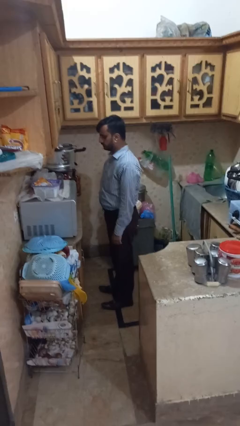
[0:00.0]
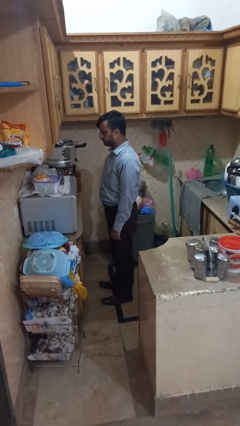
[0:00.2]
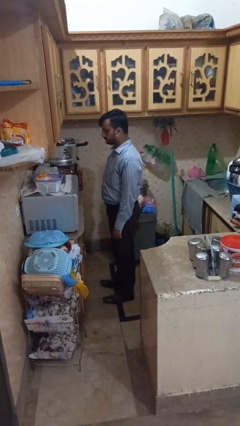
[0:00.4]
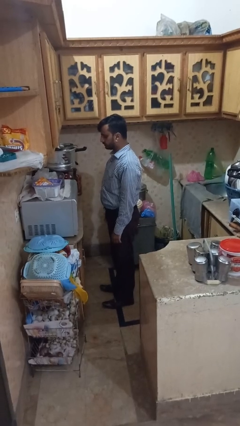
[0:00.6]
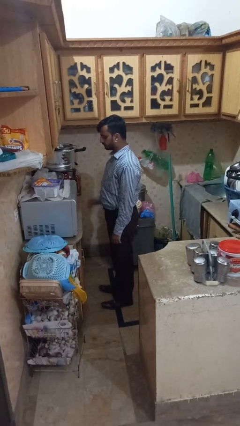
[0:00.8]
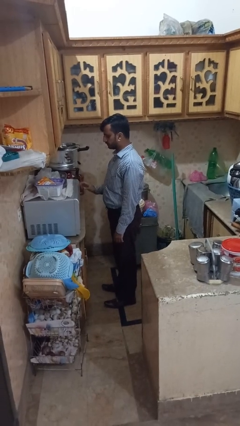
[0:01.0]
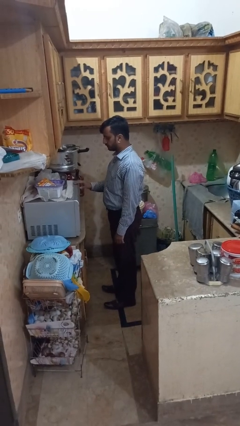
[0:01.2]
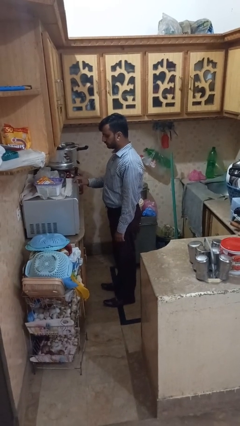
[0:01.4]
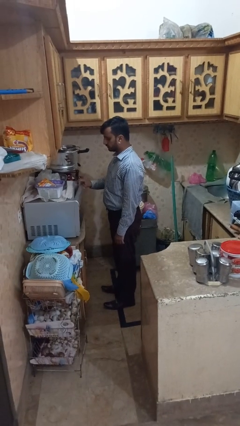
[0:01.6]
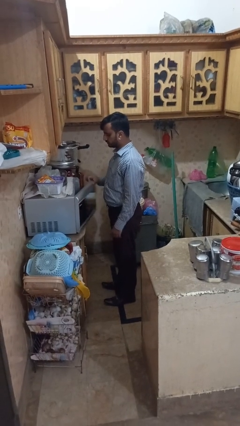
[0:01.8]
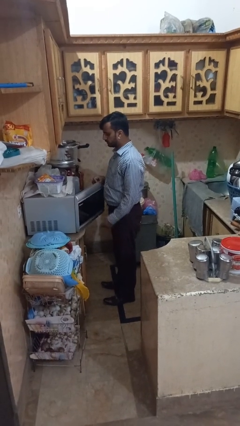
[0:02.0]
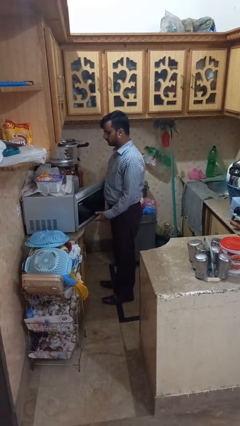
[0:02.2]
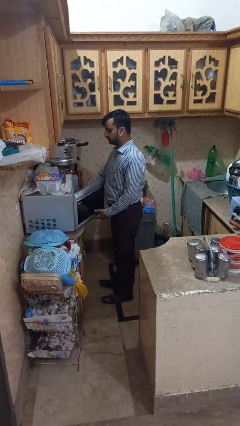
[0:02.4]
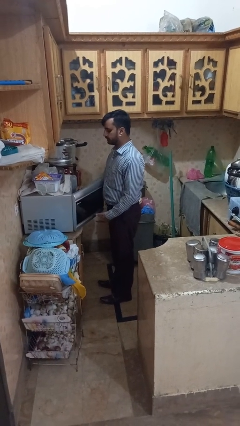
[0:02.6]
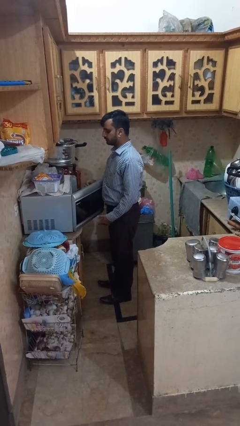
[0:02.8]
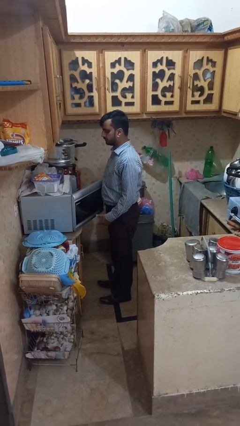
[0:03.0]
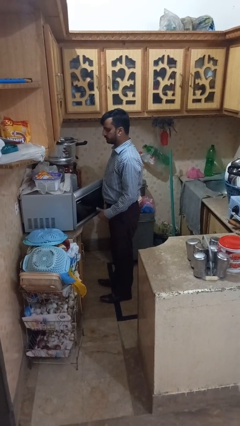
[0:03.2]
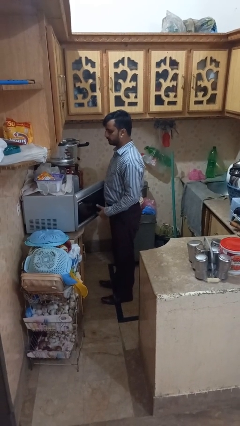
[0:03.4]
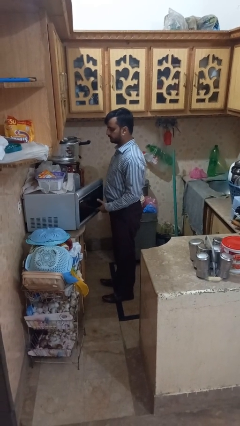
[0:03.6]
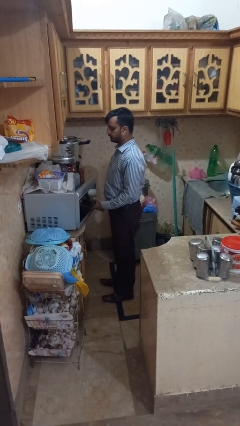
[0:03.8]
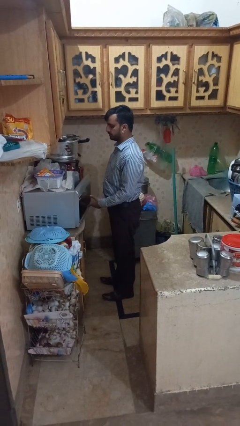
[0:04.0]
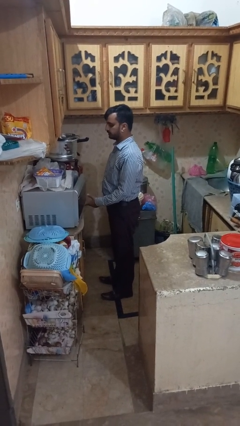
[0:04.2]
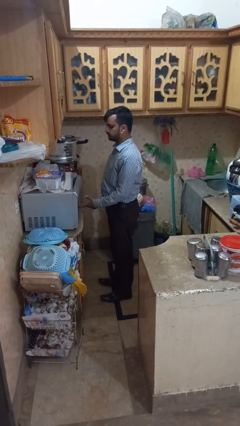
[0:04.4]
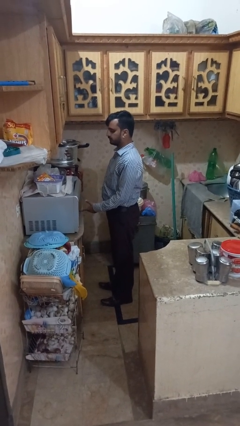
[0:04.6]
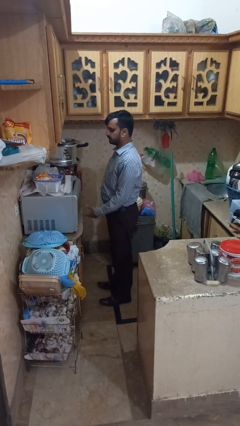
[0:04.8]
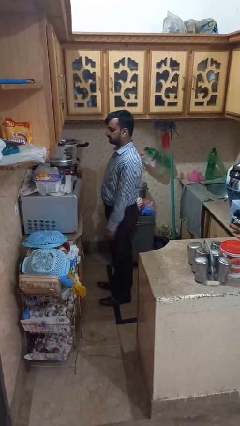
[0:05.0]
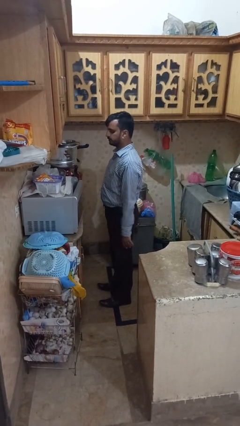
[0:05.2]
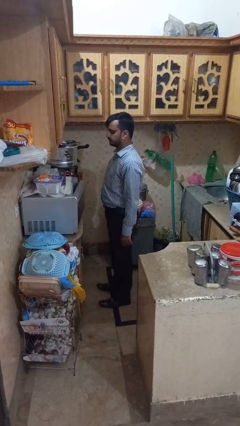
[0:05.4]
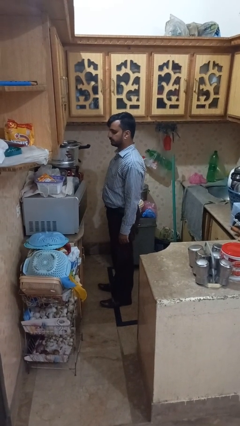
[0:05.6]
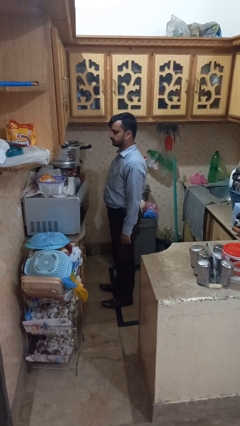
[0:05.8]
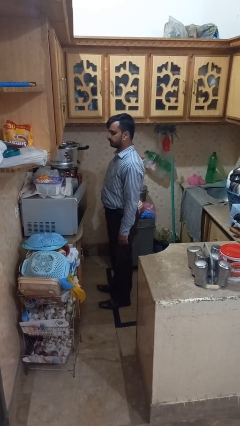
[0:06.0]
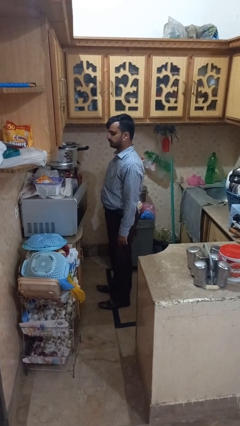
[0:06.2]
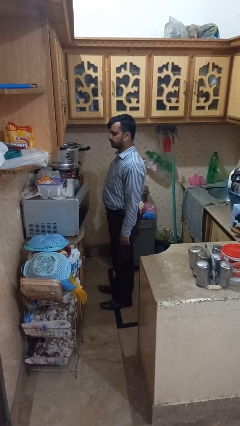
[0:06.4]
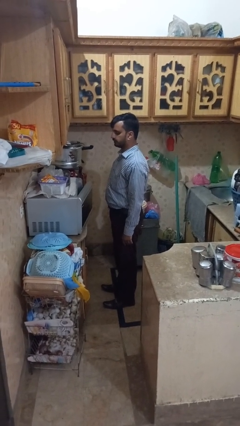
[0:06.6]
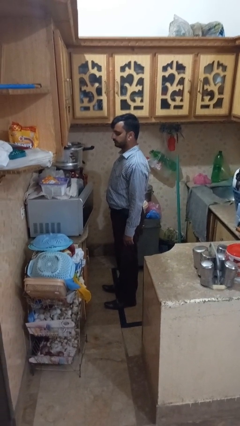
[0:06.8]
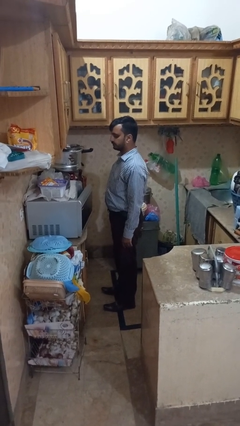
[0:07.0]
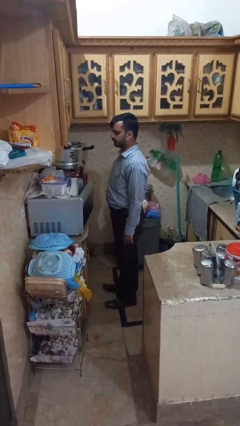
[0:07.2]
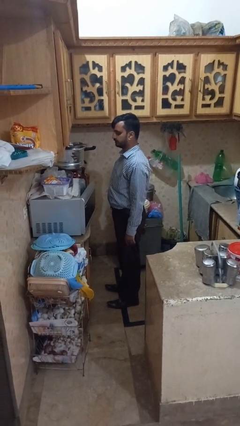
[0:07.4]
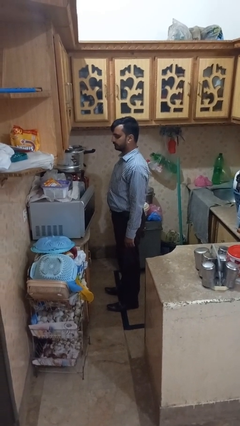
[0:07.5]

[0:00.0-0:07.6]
person takes object from microwave

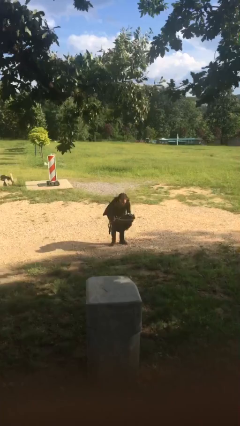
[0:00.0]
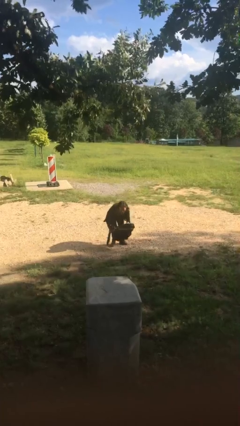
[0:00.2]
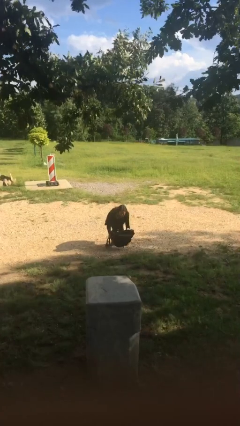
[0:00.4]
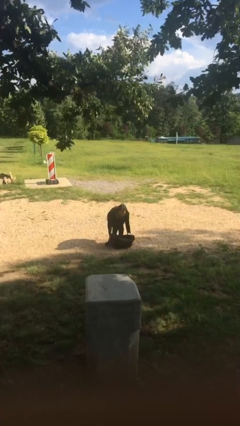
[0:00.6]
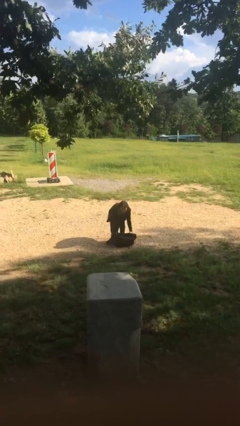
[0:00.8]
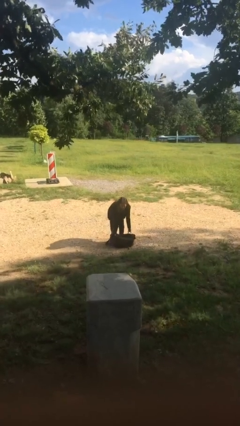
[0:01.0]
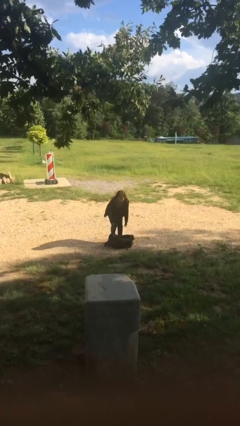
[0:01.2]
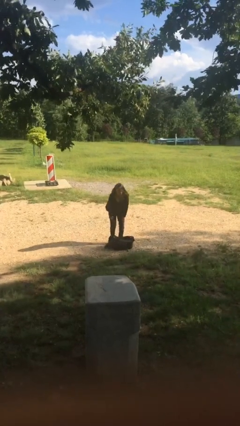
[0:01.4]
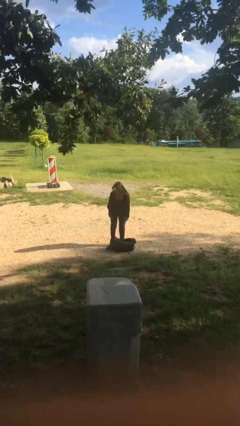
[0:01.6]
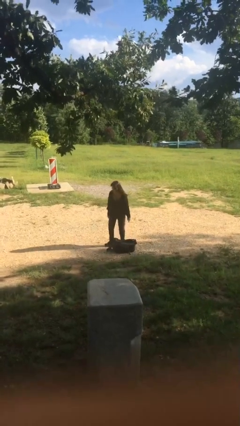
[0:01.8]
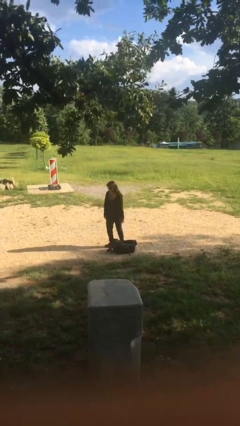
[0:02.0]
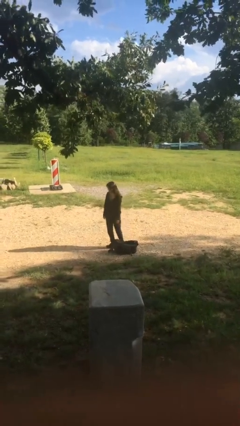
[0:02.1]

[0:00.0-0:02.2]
person puts down object on floor

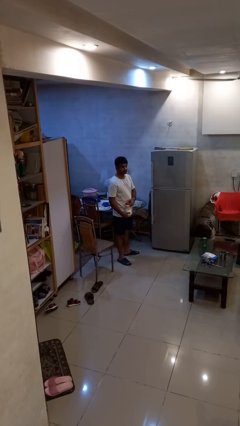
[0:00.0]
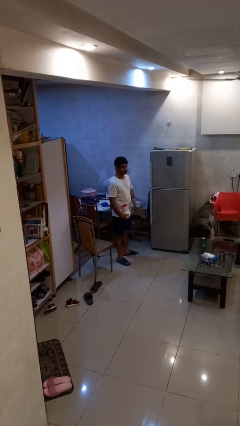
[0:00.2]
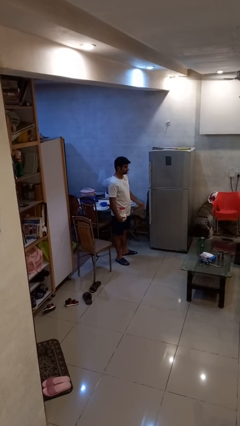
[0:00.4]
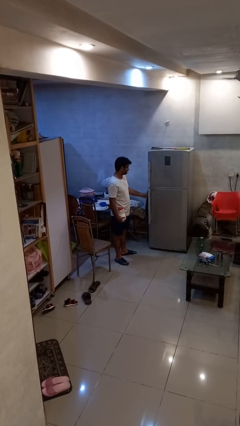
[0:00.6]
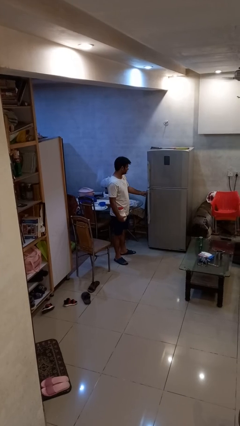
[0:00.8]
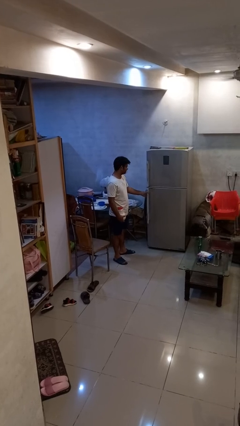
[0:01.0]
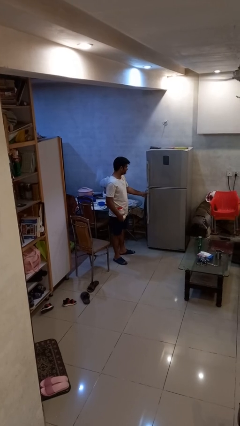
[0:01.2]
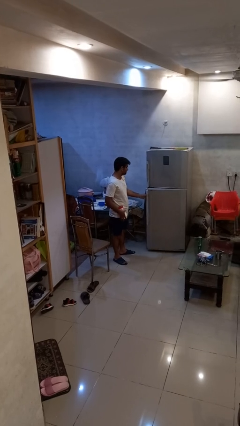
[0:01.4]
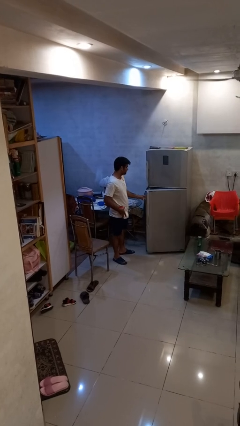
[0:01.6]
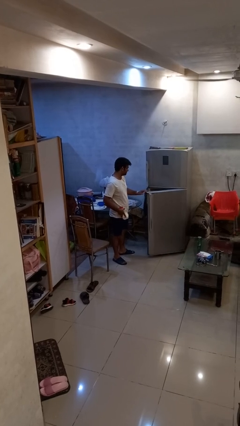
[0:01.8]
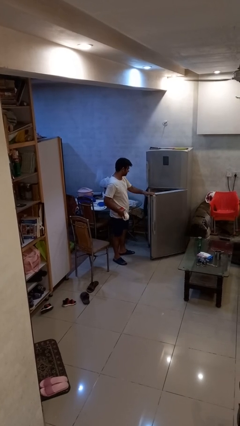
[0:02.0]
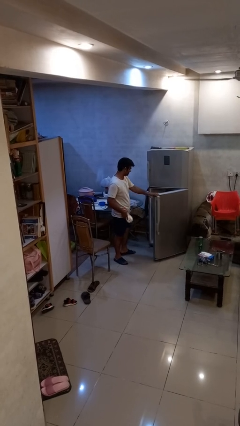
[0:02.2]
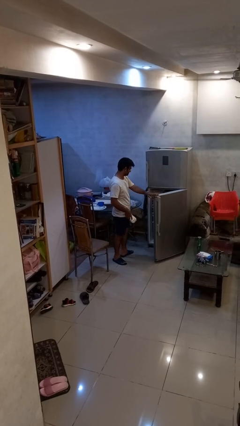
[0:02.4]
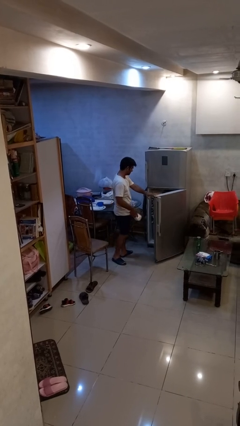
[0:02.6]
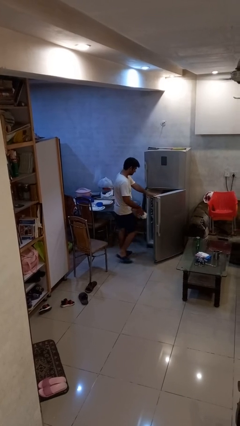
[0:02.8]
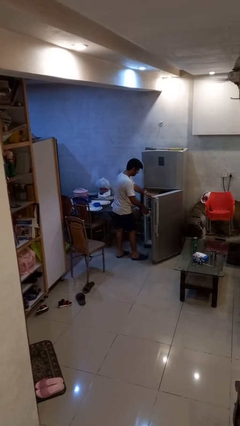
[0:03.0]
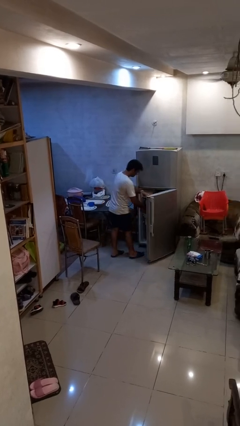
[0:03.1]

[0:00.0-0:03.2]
person opens refrigerator

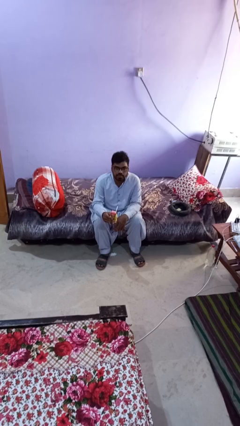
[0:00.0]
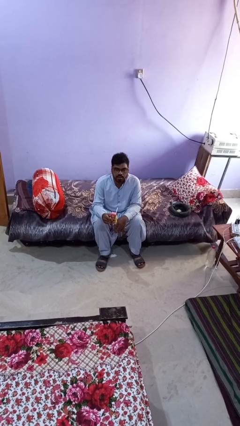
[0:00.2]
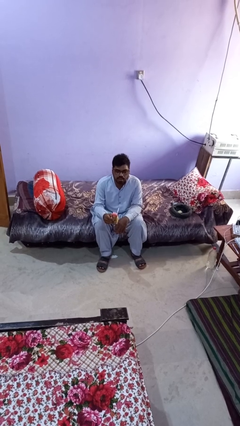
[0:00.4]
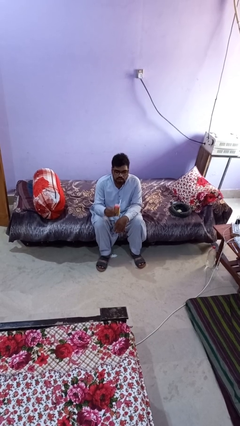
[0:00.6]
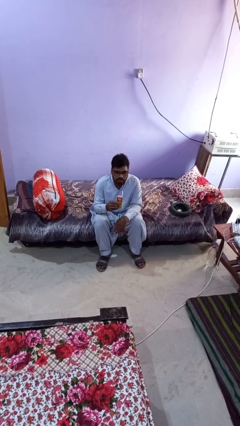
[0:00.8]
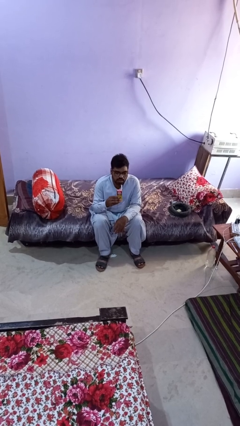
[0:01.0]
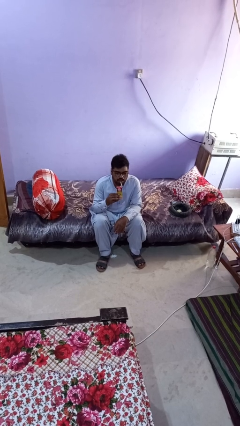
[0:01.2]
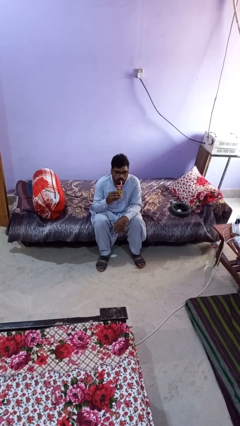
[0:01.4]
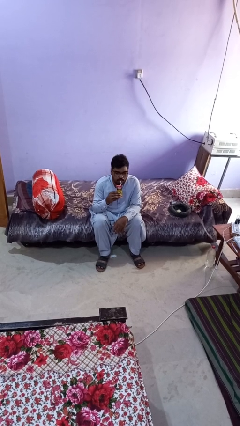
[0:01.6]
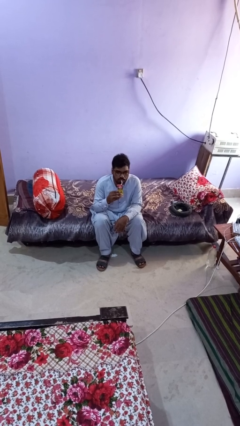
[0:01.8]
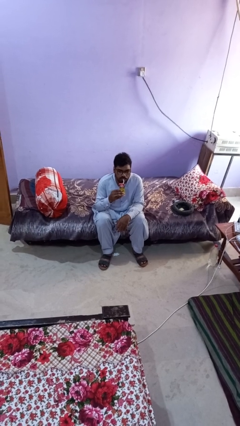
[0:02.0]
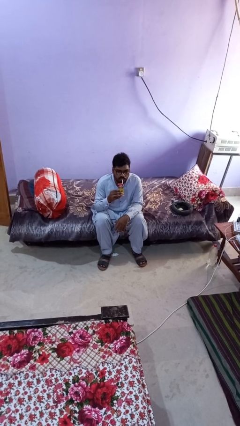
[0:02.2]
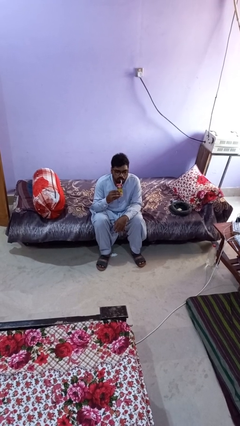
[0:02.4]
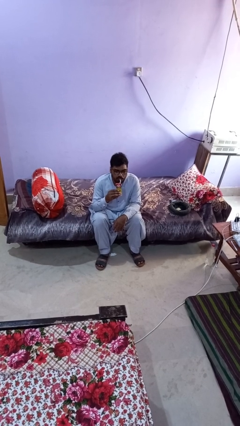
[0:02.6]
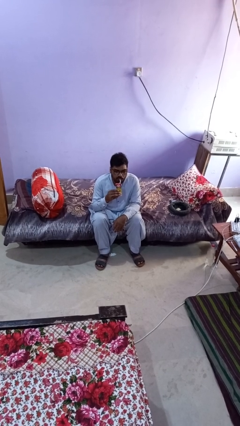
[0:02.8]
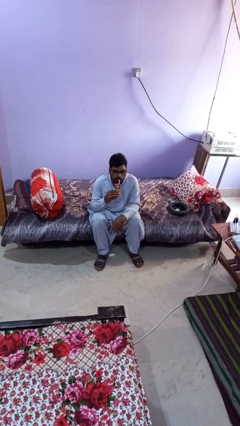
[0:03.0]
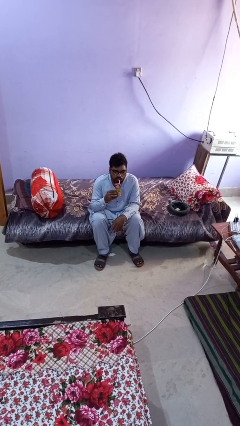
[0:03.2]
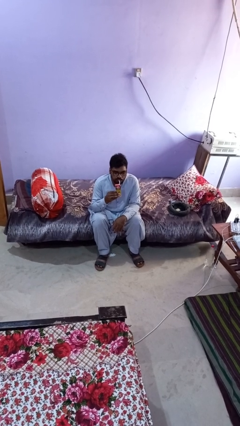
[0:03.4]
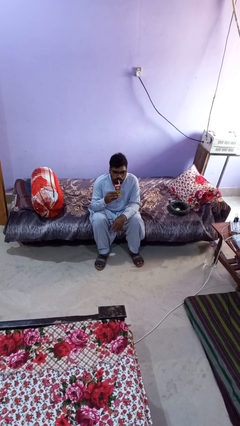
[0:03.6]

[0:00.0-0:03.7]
person drinks from straw
